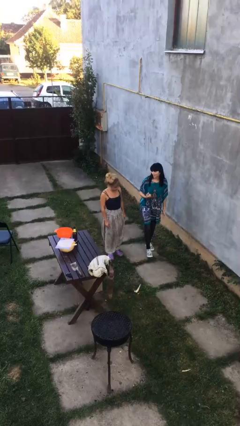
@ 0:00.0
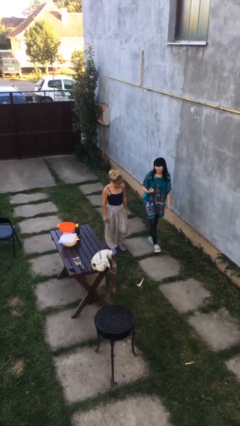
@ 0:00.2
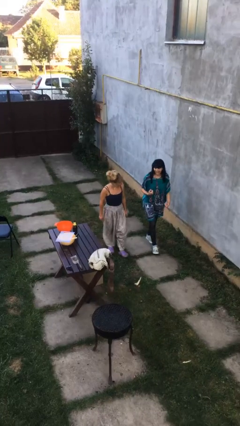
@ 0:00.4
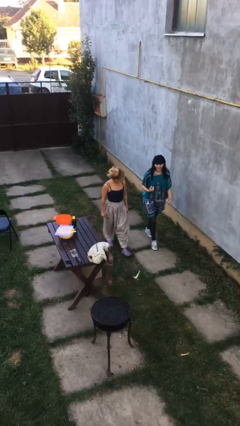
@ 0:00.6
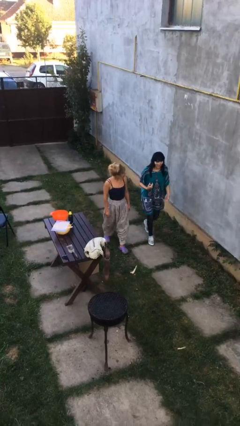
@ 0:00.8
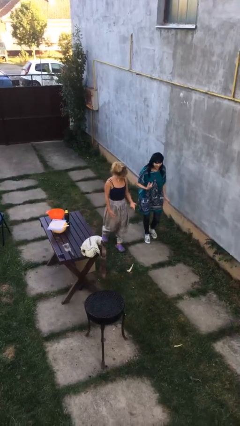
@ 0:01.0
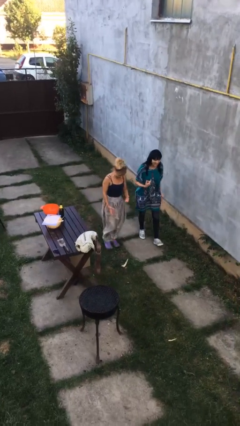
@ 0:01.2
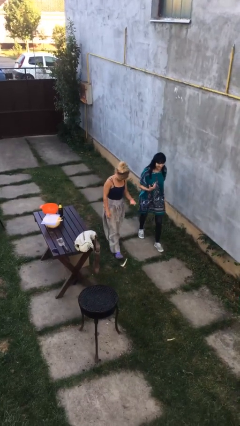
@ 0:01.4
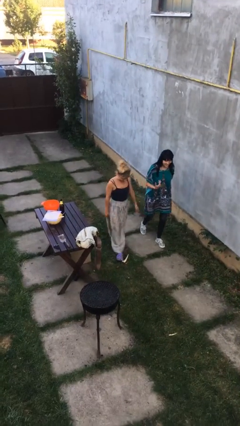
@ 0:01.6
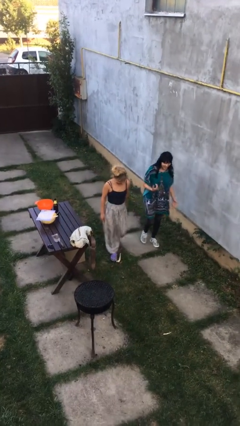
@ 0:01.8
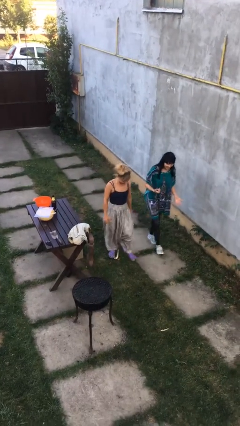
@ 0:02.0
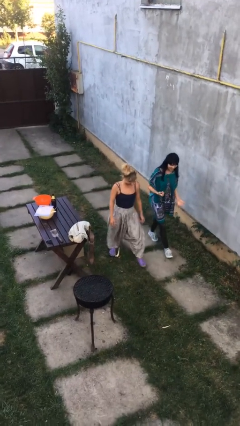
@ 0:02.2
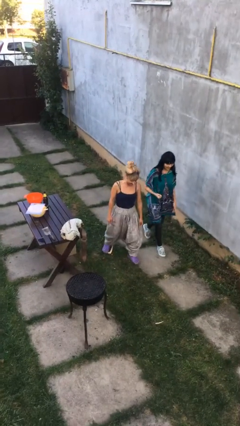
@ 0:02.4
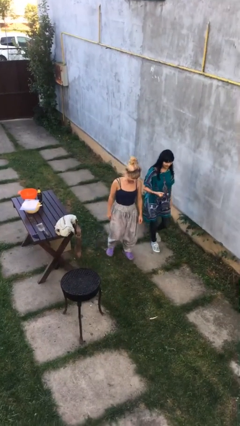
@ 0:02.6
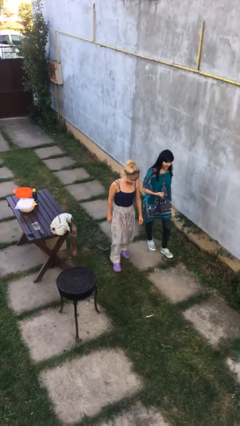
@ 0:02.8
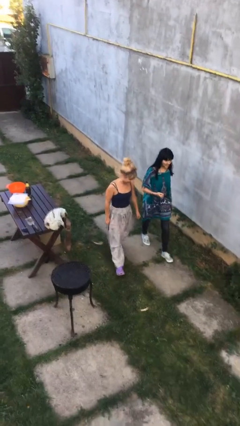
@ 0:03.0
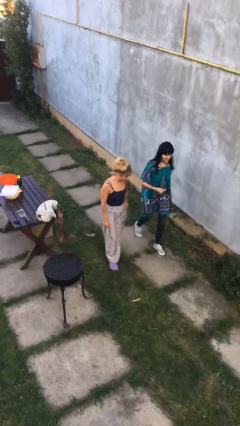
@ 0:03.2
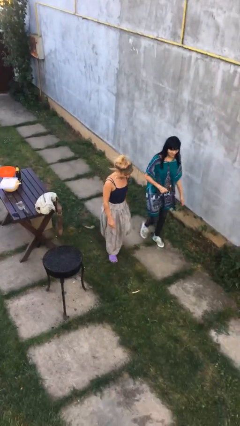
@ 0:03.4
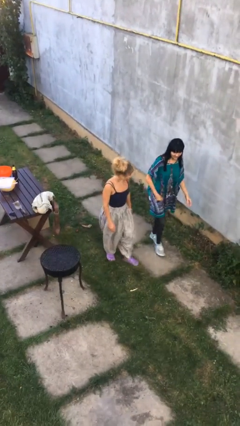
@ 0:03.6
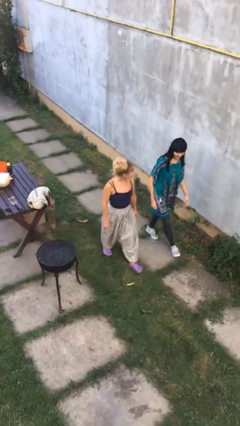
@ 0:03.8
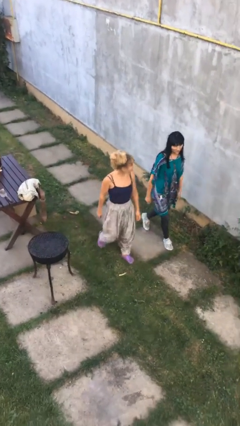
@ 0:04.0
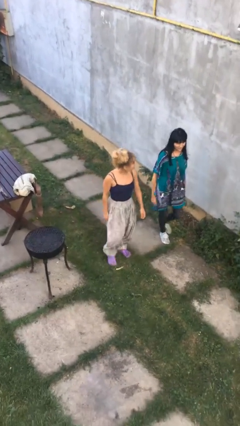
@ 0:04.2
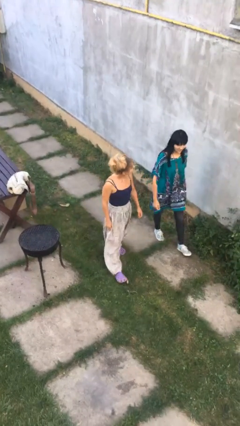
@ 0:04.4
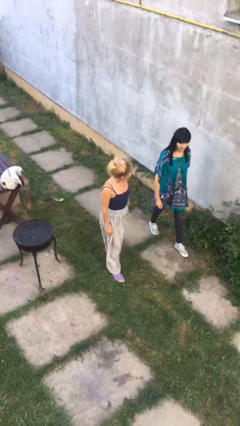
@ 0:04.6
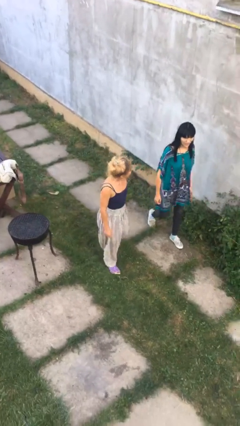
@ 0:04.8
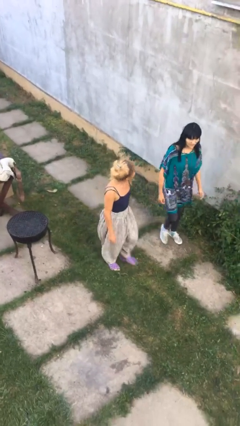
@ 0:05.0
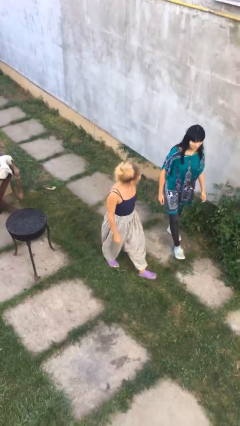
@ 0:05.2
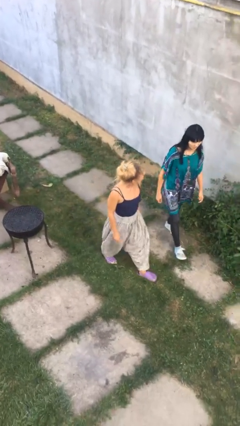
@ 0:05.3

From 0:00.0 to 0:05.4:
person talks to person

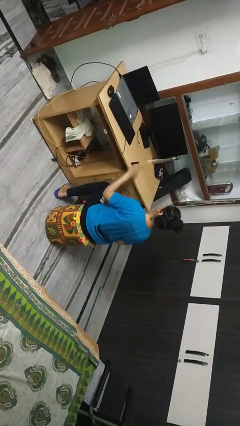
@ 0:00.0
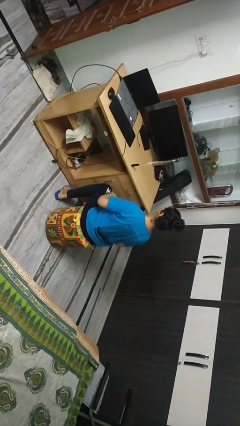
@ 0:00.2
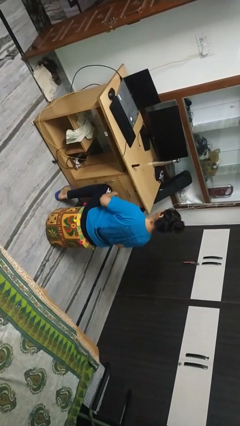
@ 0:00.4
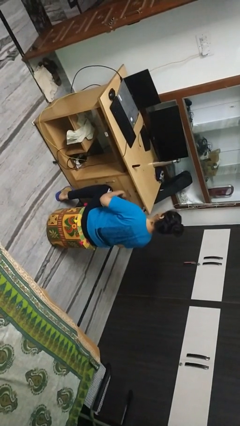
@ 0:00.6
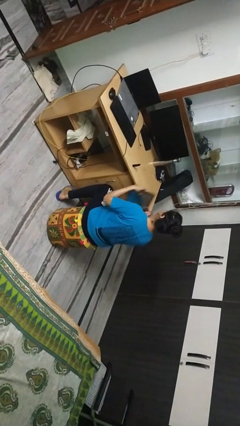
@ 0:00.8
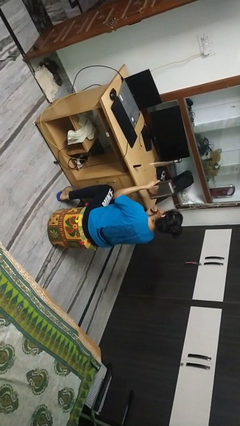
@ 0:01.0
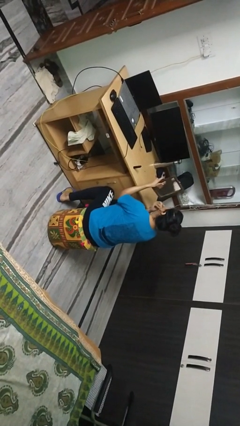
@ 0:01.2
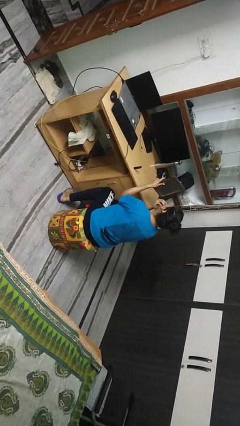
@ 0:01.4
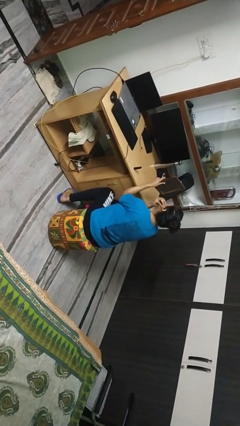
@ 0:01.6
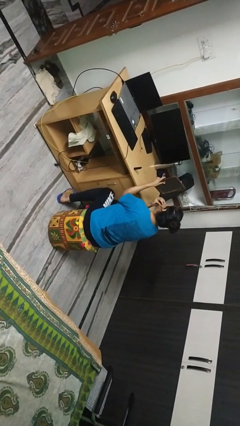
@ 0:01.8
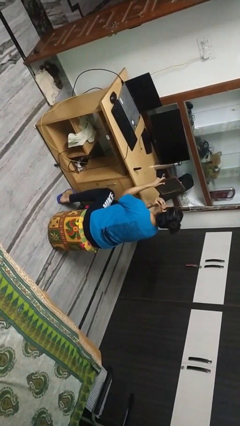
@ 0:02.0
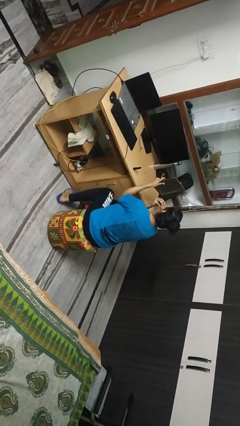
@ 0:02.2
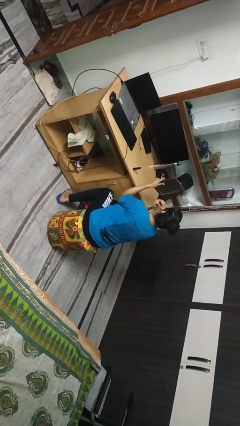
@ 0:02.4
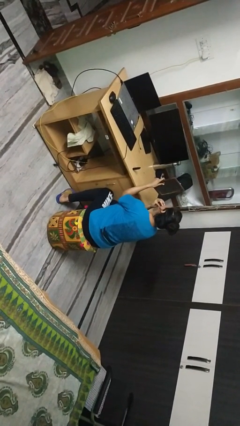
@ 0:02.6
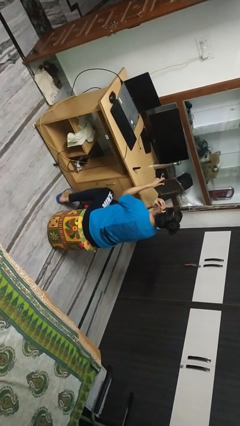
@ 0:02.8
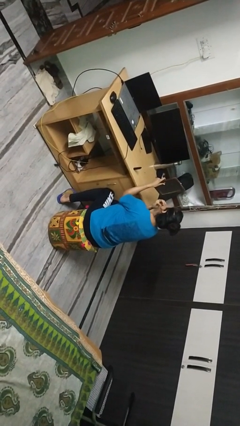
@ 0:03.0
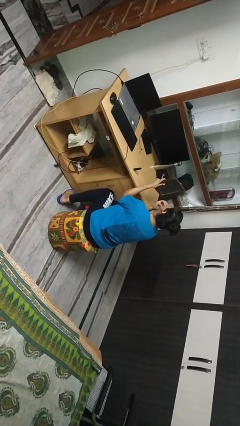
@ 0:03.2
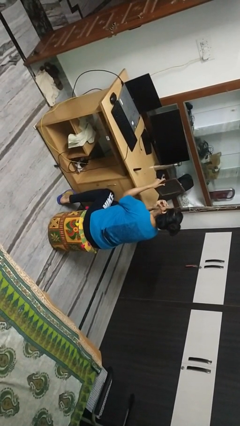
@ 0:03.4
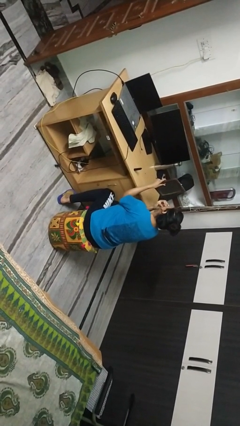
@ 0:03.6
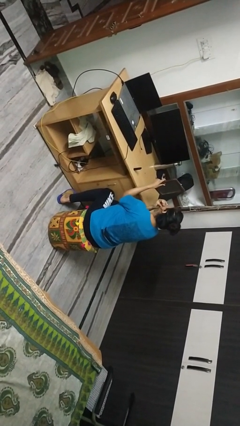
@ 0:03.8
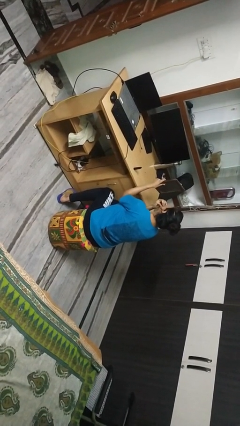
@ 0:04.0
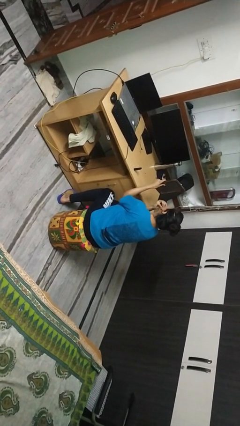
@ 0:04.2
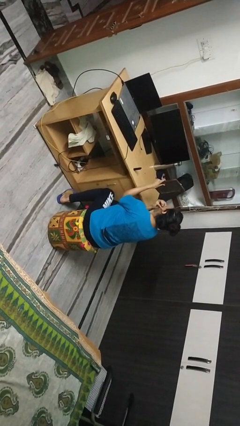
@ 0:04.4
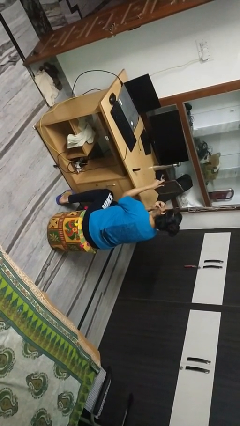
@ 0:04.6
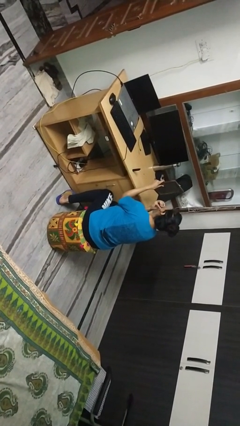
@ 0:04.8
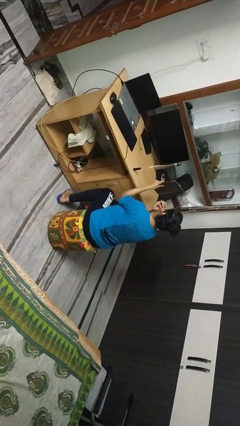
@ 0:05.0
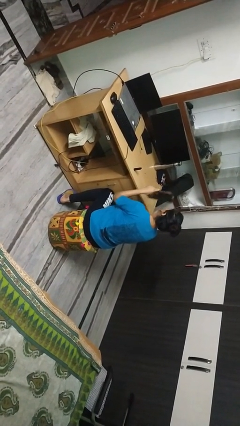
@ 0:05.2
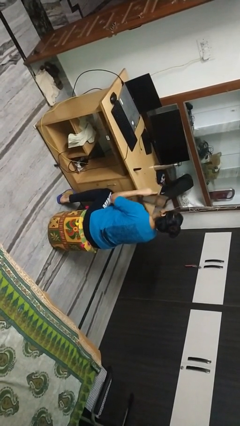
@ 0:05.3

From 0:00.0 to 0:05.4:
person applies lip makeup

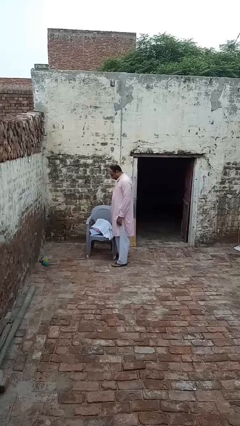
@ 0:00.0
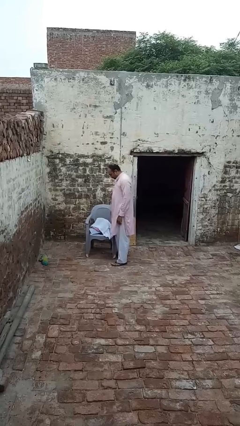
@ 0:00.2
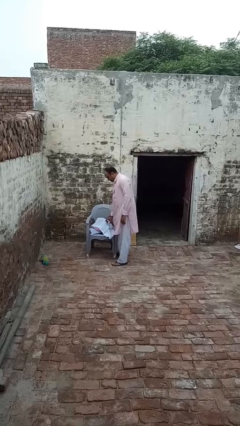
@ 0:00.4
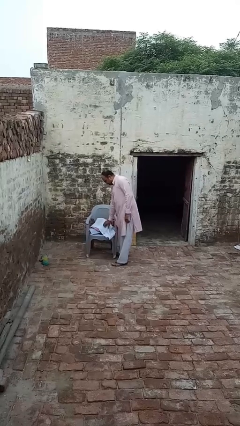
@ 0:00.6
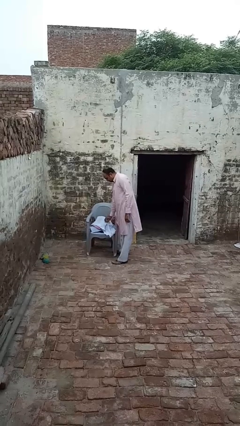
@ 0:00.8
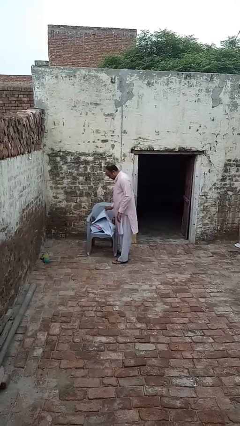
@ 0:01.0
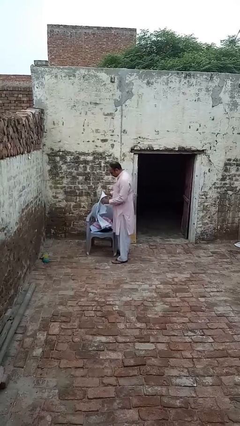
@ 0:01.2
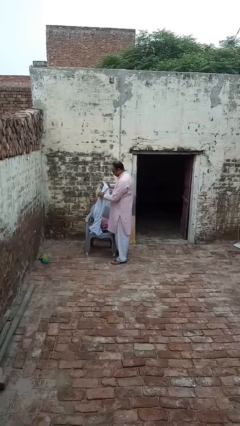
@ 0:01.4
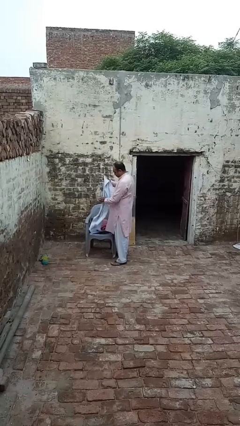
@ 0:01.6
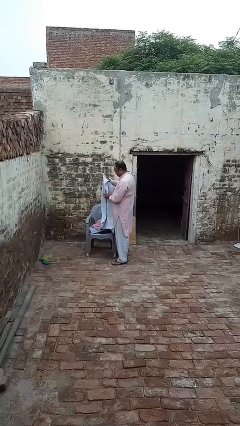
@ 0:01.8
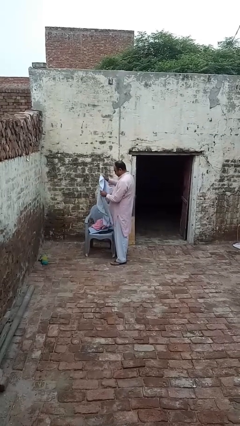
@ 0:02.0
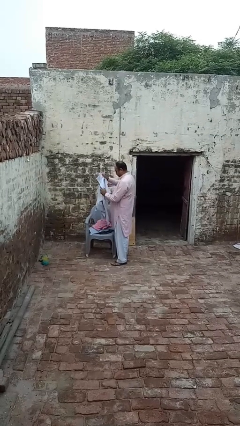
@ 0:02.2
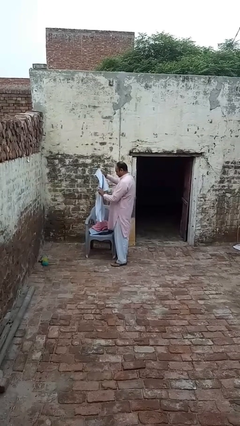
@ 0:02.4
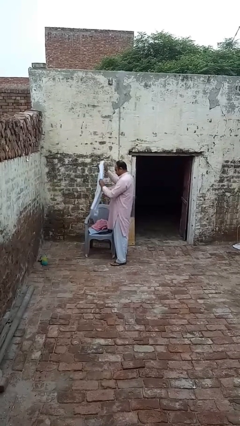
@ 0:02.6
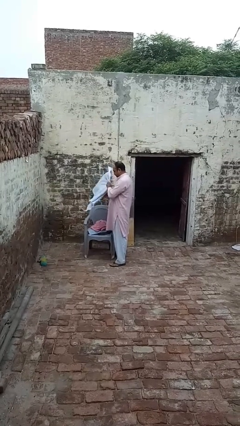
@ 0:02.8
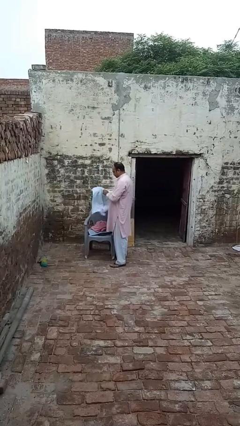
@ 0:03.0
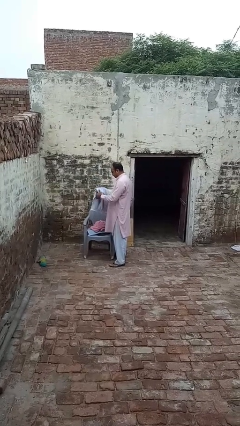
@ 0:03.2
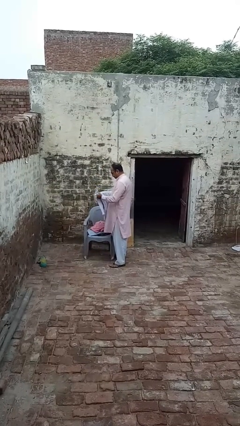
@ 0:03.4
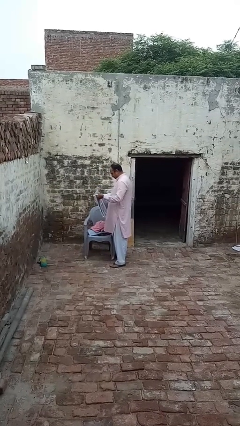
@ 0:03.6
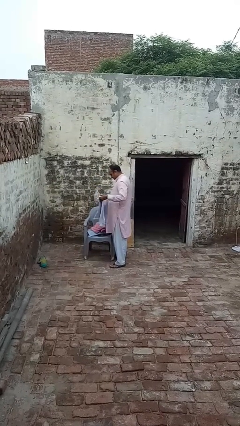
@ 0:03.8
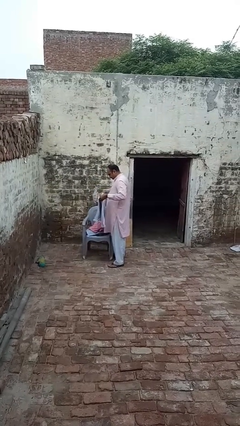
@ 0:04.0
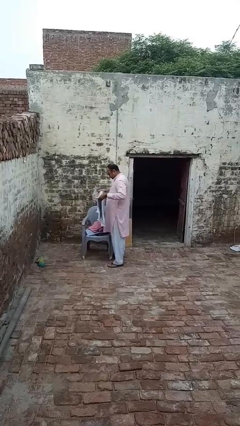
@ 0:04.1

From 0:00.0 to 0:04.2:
person folds towel

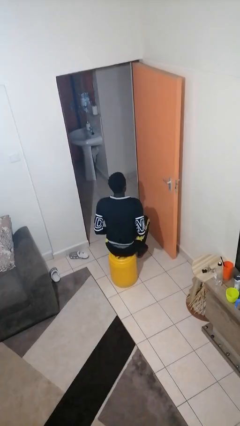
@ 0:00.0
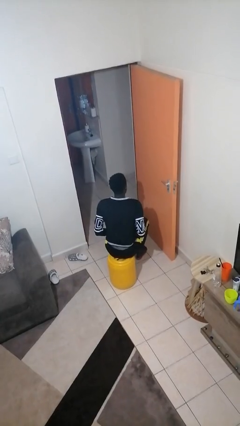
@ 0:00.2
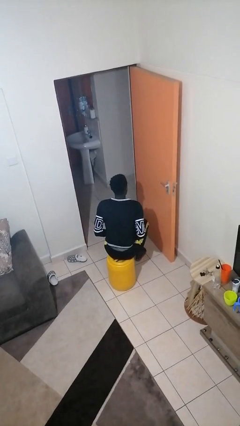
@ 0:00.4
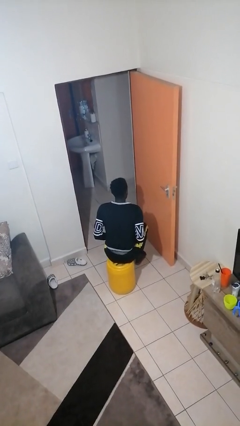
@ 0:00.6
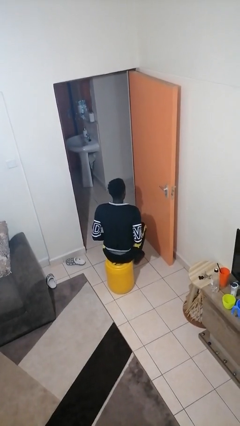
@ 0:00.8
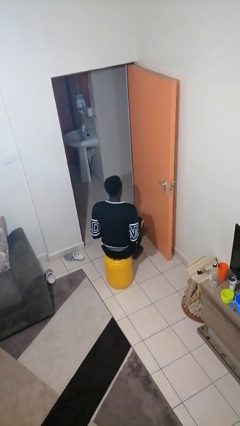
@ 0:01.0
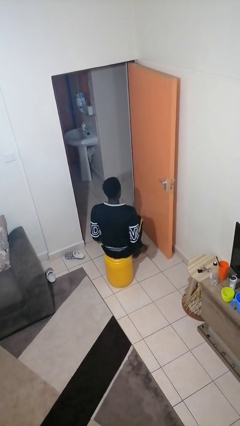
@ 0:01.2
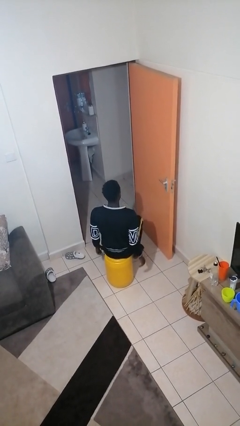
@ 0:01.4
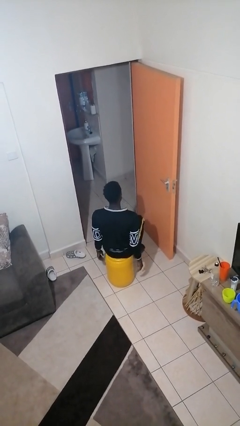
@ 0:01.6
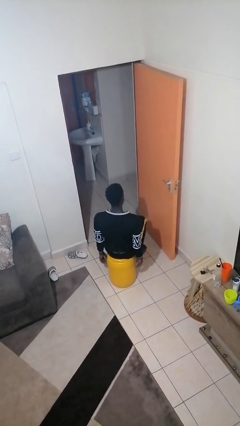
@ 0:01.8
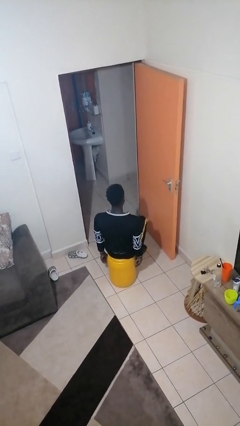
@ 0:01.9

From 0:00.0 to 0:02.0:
person slaps hands on thighs

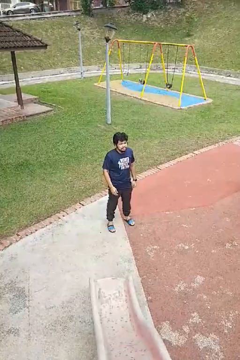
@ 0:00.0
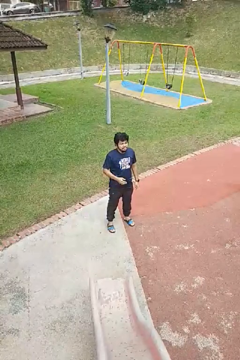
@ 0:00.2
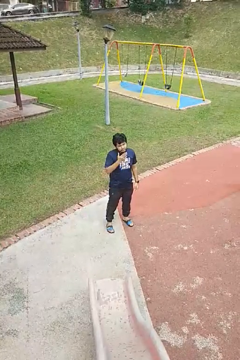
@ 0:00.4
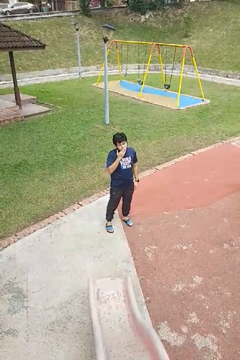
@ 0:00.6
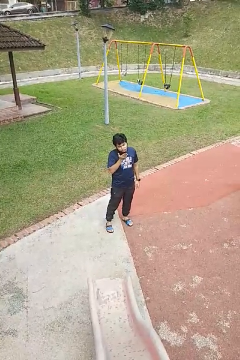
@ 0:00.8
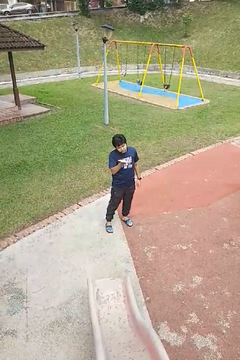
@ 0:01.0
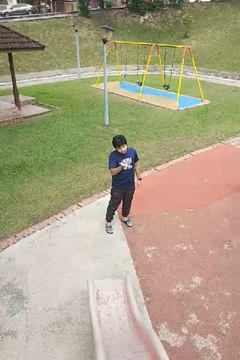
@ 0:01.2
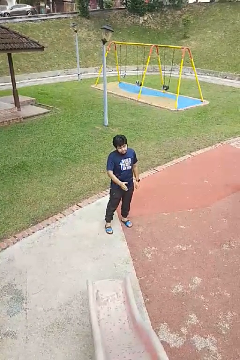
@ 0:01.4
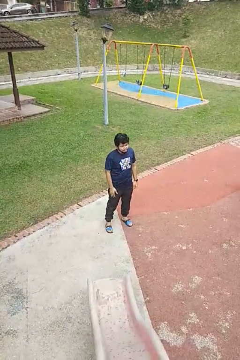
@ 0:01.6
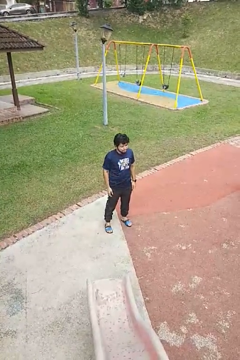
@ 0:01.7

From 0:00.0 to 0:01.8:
person gestures blow kiss
